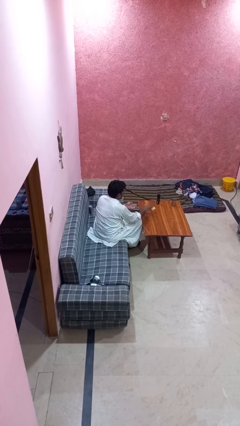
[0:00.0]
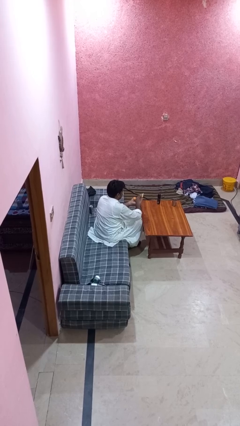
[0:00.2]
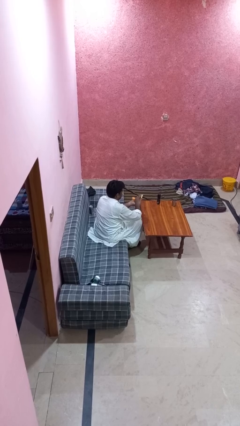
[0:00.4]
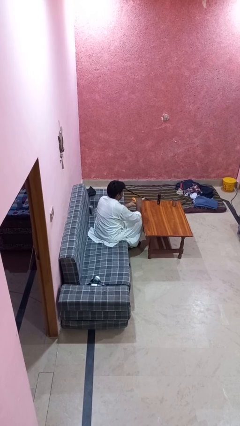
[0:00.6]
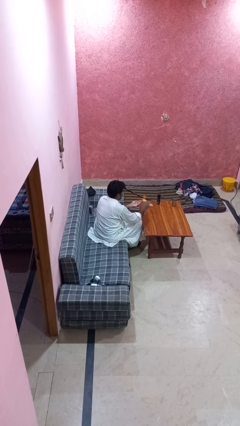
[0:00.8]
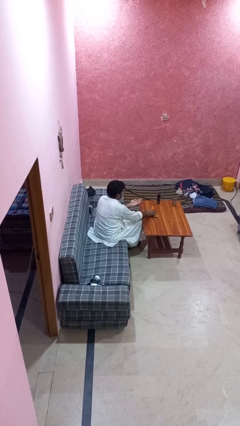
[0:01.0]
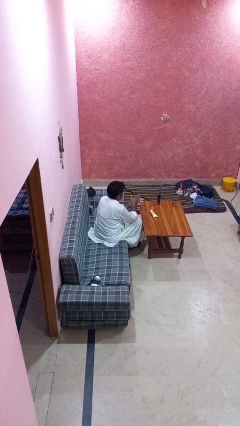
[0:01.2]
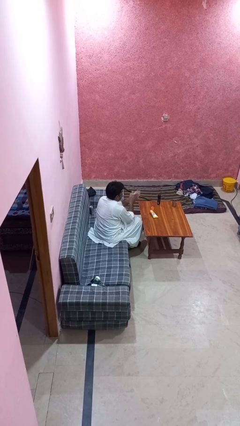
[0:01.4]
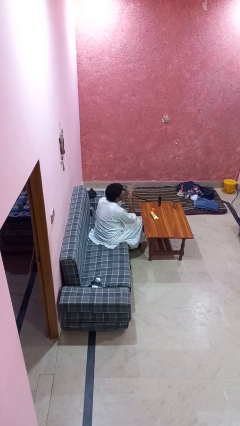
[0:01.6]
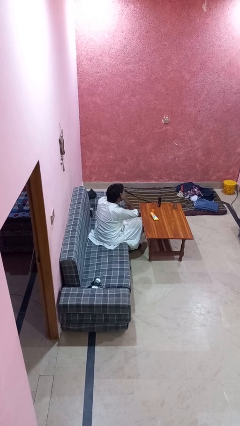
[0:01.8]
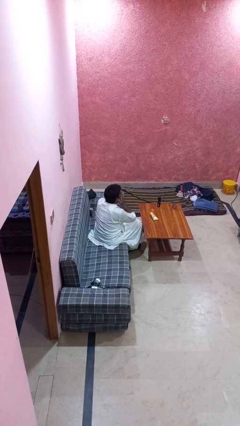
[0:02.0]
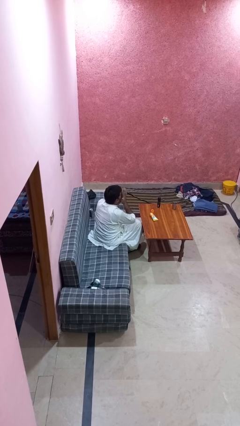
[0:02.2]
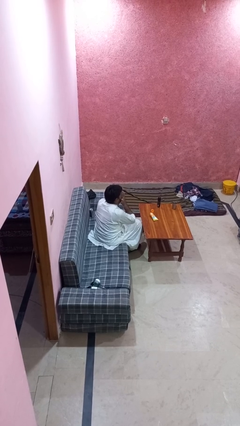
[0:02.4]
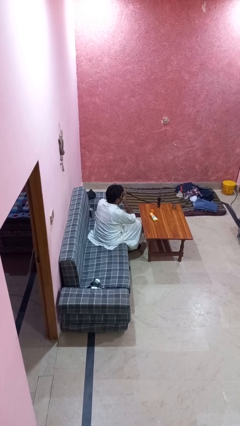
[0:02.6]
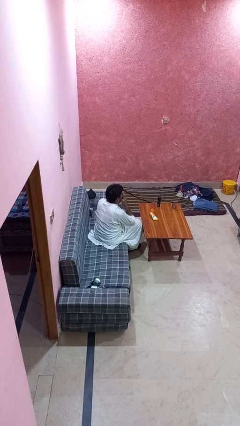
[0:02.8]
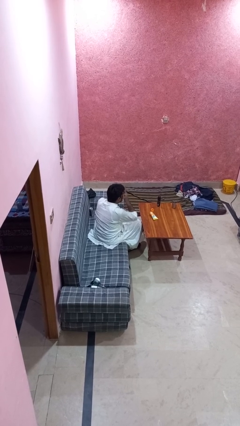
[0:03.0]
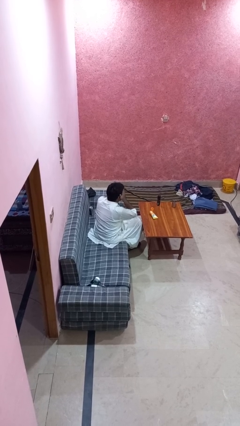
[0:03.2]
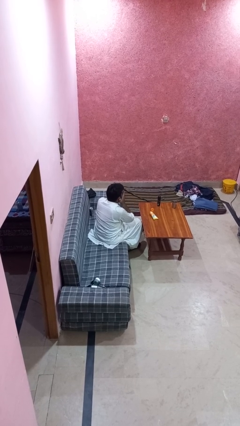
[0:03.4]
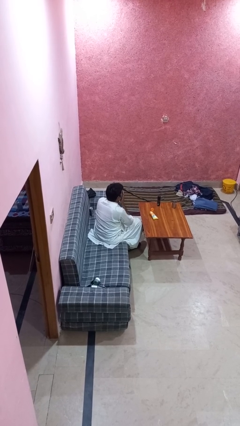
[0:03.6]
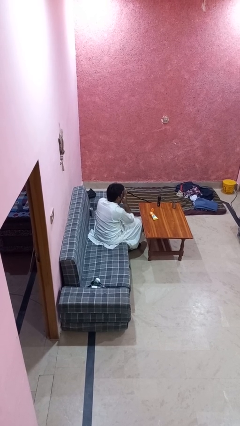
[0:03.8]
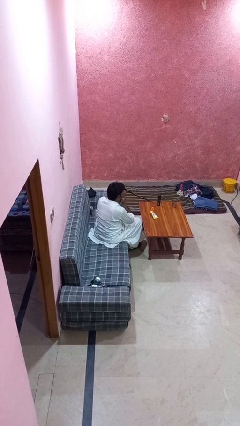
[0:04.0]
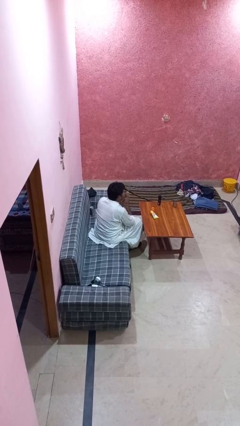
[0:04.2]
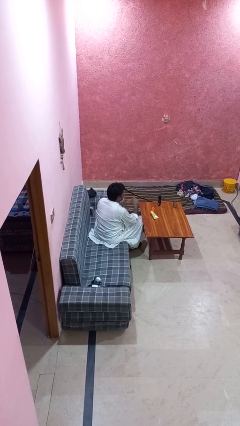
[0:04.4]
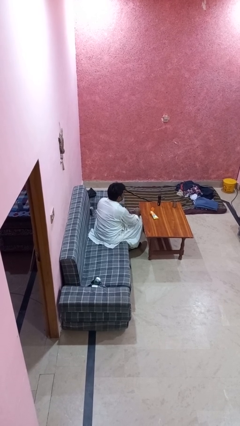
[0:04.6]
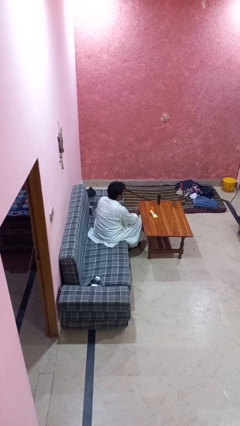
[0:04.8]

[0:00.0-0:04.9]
person applies sunscreen

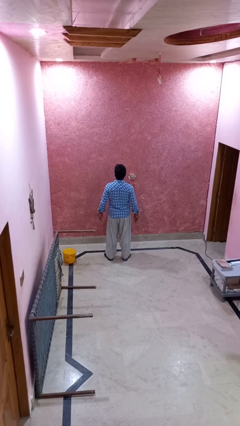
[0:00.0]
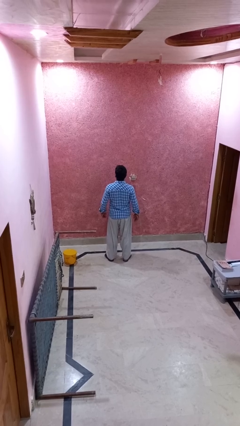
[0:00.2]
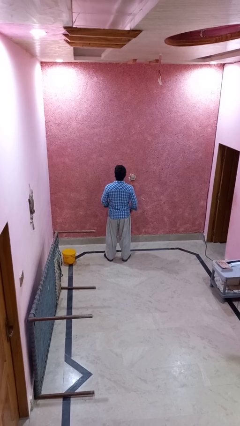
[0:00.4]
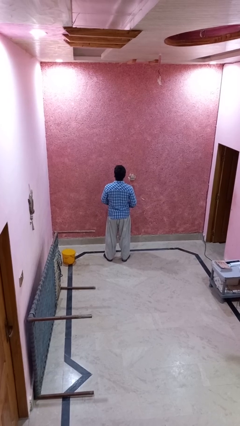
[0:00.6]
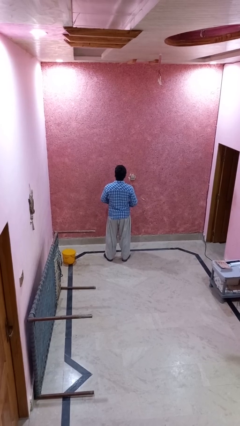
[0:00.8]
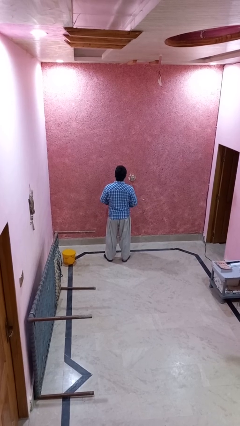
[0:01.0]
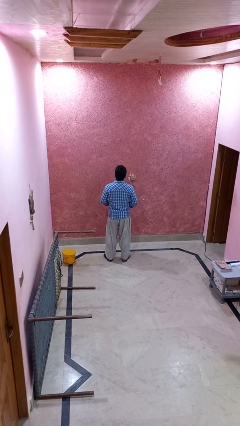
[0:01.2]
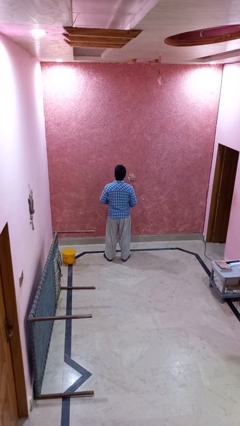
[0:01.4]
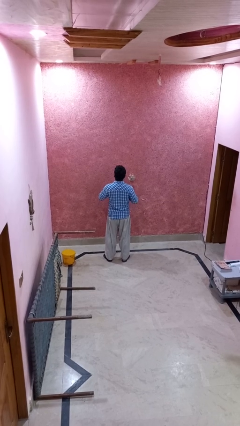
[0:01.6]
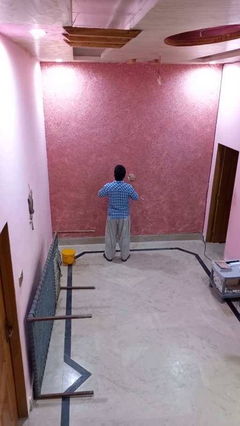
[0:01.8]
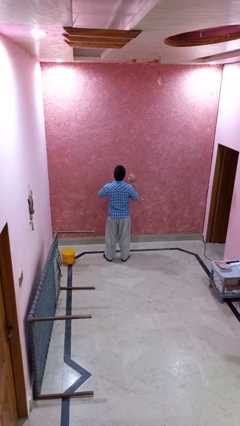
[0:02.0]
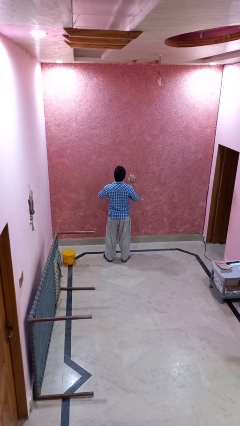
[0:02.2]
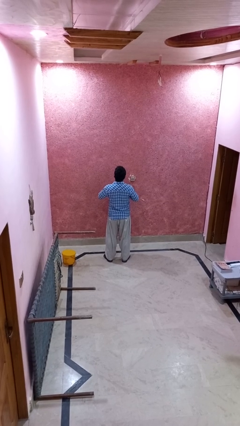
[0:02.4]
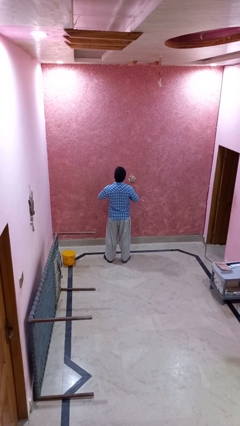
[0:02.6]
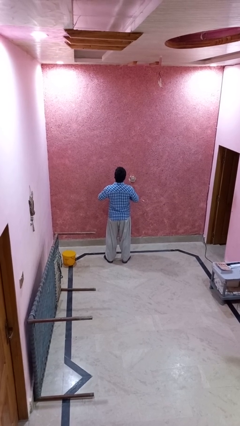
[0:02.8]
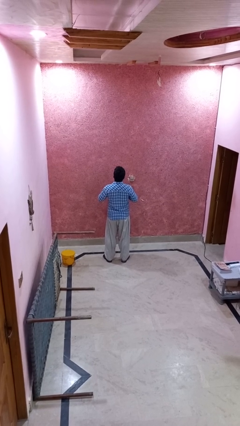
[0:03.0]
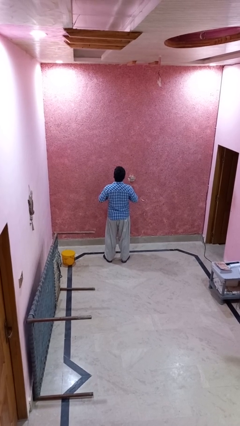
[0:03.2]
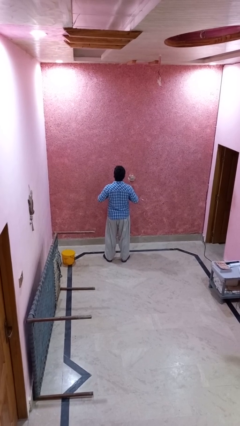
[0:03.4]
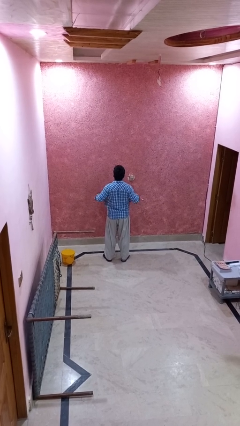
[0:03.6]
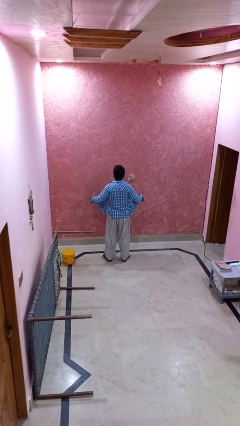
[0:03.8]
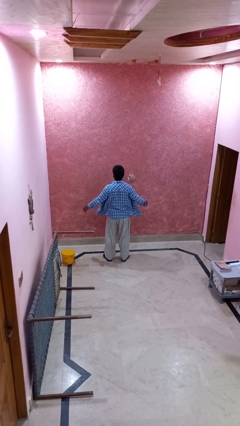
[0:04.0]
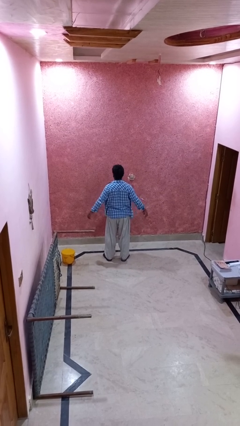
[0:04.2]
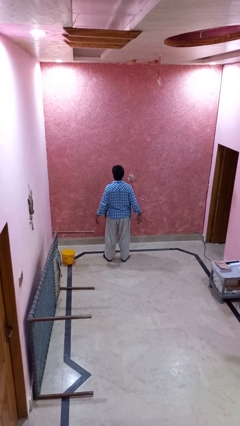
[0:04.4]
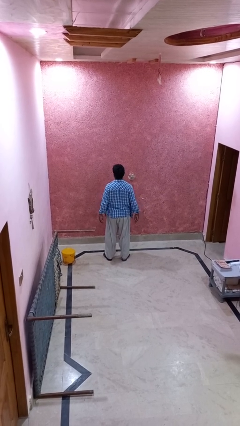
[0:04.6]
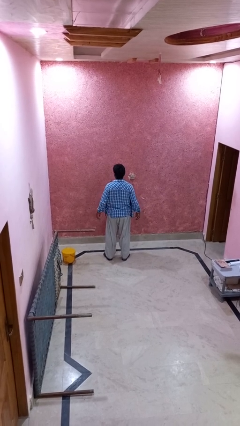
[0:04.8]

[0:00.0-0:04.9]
person unbuttons shirt

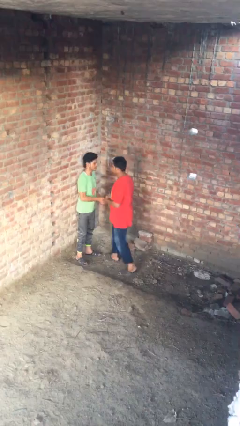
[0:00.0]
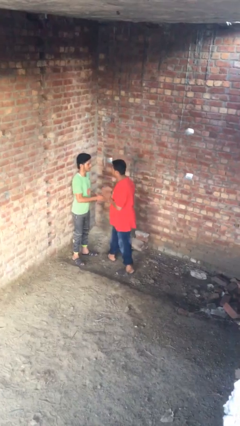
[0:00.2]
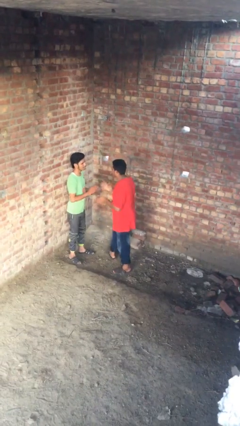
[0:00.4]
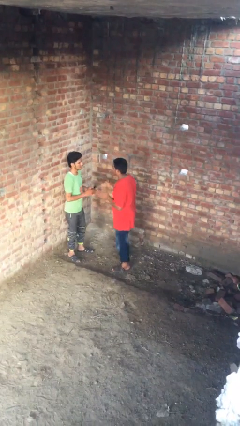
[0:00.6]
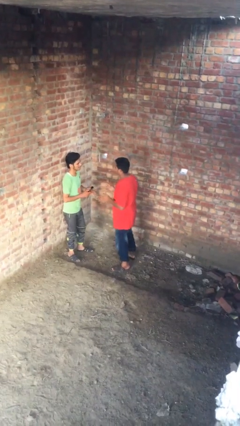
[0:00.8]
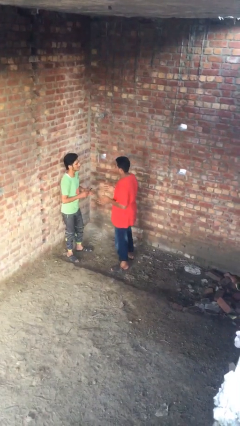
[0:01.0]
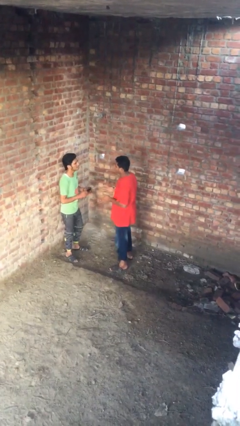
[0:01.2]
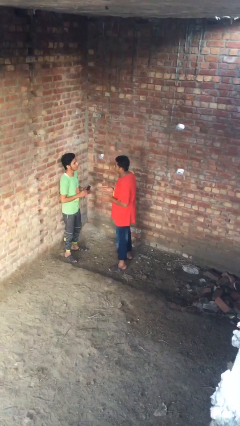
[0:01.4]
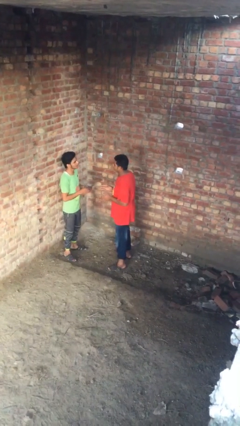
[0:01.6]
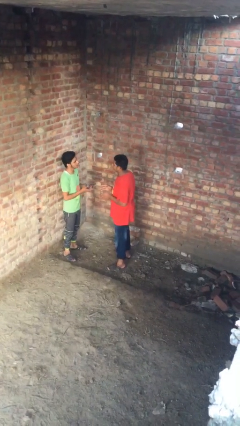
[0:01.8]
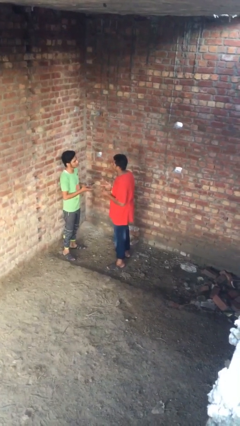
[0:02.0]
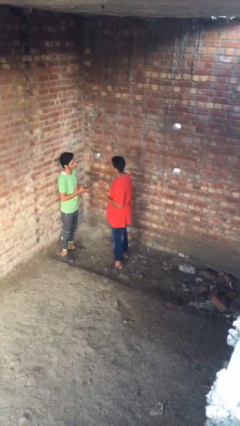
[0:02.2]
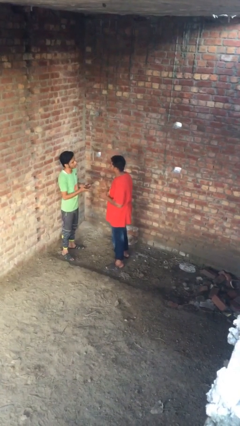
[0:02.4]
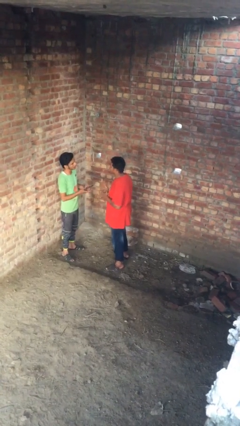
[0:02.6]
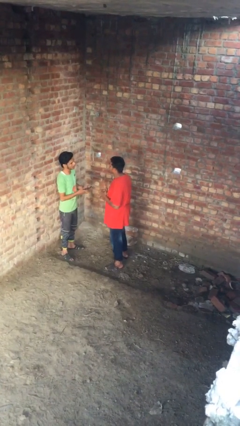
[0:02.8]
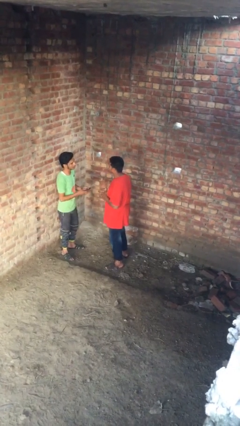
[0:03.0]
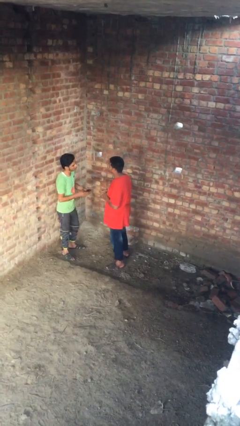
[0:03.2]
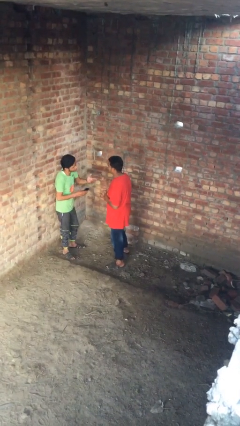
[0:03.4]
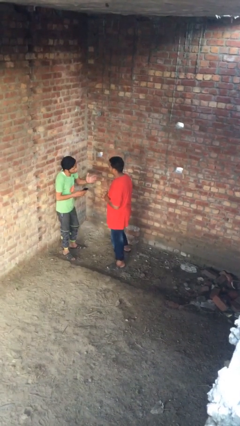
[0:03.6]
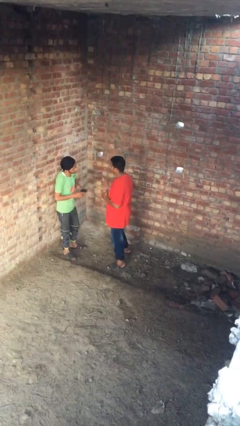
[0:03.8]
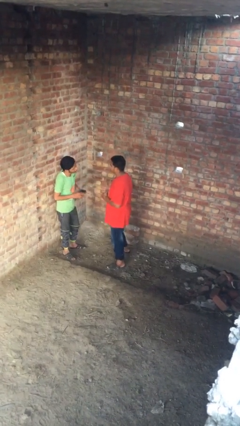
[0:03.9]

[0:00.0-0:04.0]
person talks to person

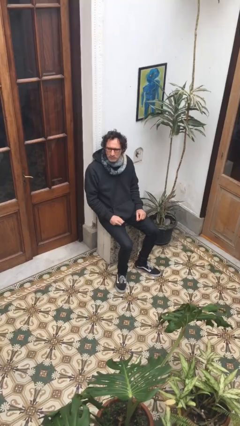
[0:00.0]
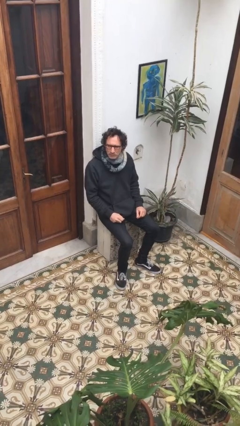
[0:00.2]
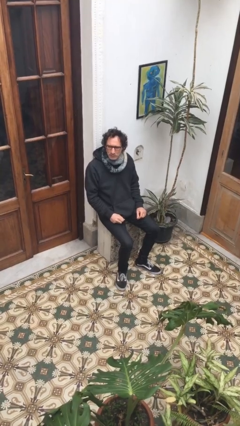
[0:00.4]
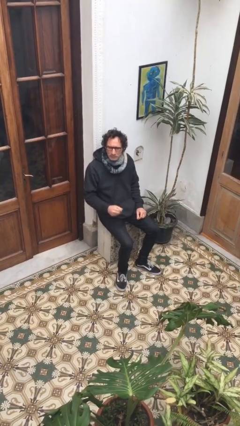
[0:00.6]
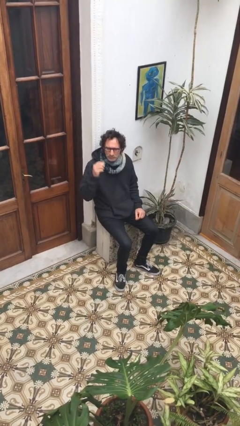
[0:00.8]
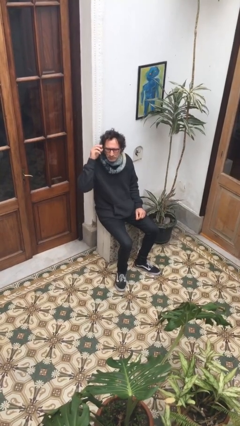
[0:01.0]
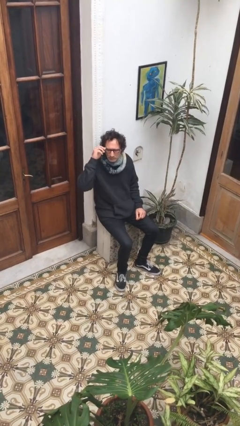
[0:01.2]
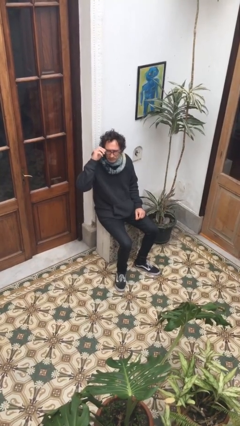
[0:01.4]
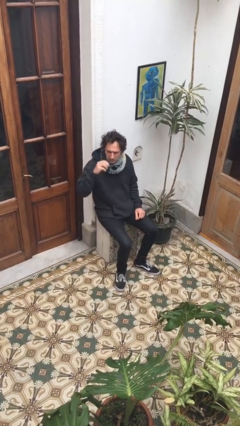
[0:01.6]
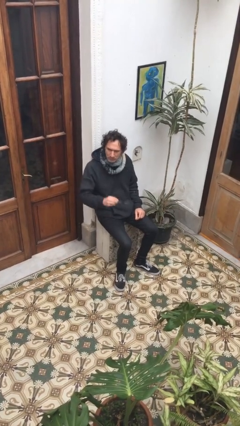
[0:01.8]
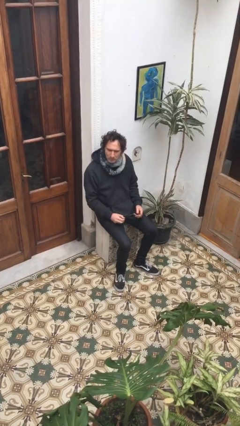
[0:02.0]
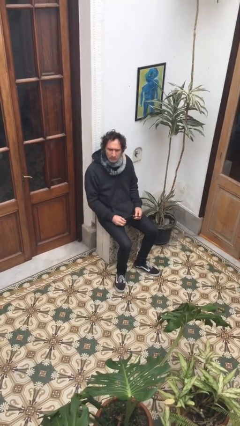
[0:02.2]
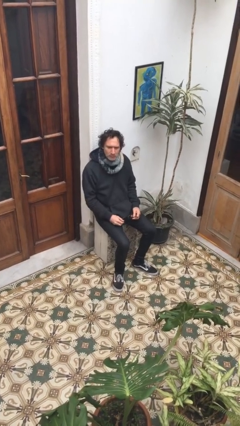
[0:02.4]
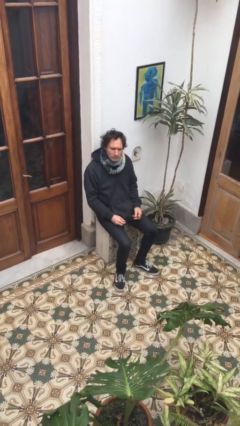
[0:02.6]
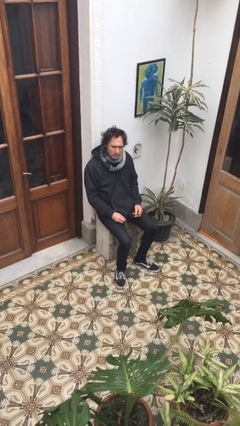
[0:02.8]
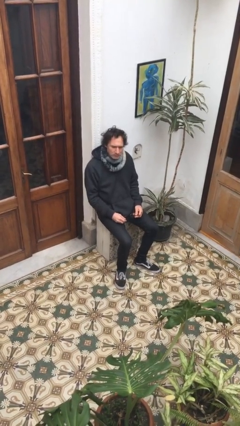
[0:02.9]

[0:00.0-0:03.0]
person takes off glasses

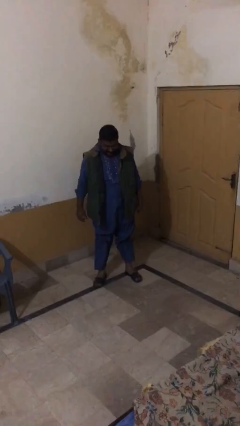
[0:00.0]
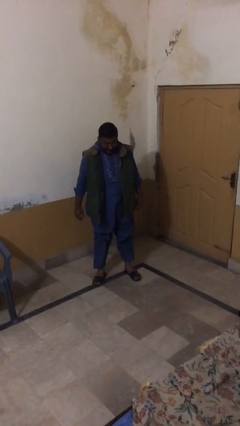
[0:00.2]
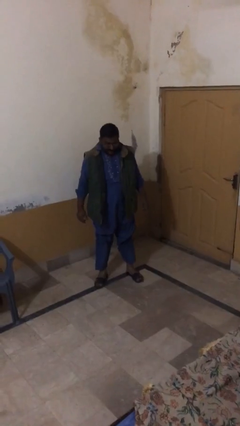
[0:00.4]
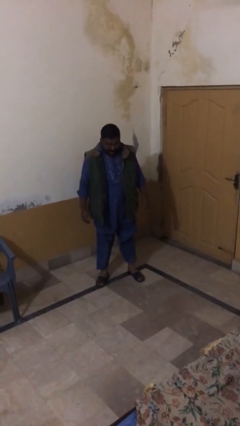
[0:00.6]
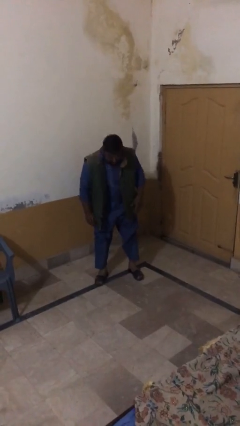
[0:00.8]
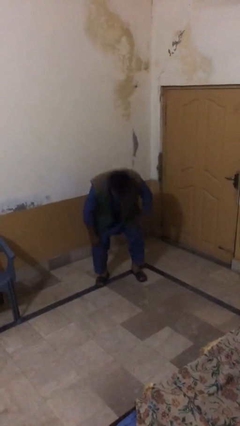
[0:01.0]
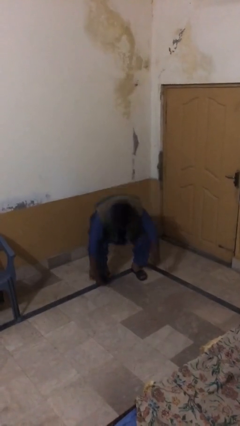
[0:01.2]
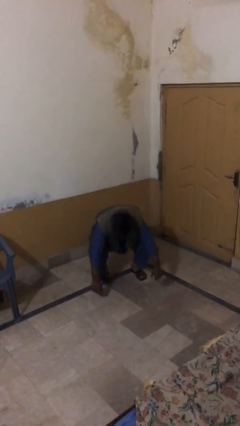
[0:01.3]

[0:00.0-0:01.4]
person sits down
